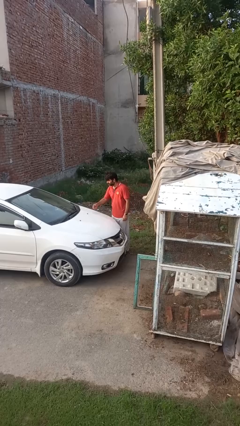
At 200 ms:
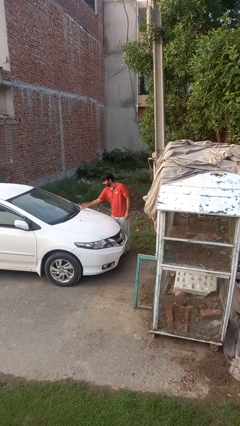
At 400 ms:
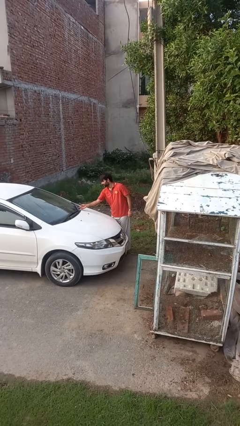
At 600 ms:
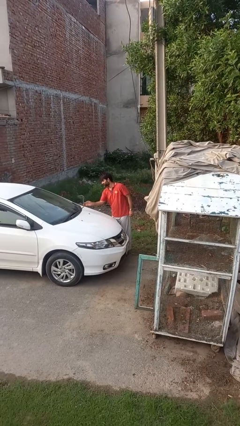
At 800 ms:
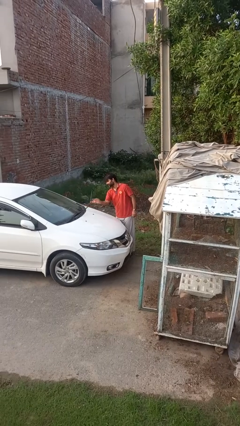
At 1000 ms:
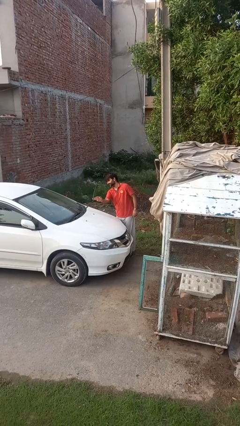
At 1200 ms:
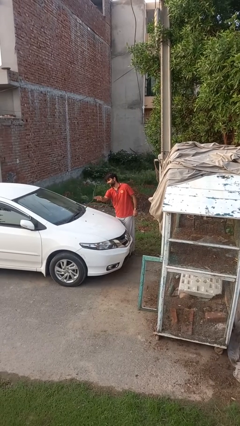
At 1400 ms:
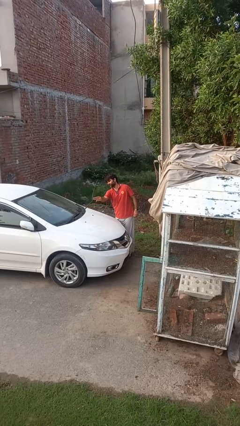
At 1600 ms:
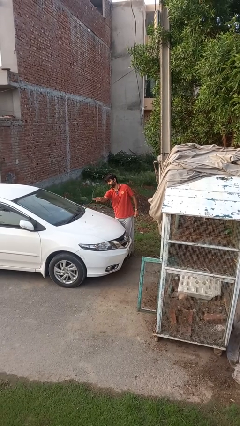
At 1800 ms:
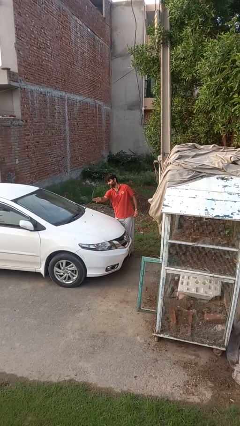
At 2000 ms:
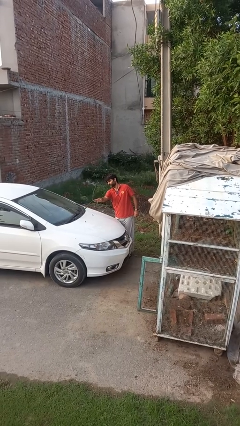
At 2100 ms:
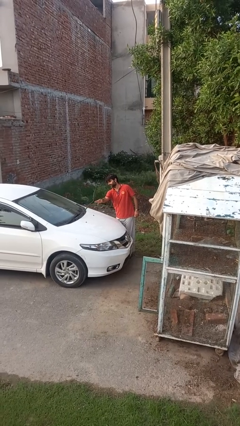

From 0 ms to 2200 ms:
person flips up car wipers

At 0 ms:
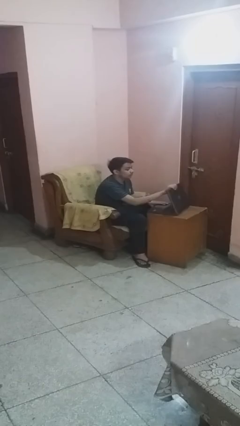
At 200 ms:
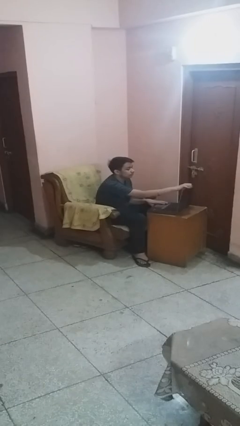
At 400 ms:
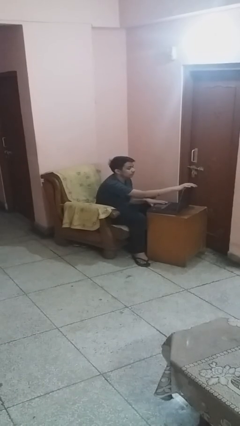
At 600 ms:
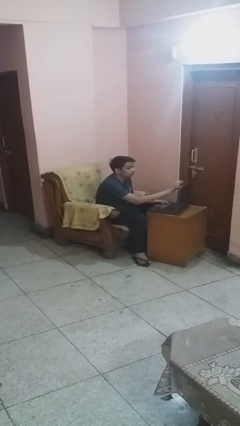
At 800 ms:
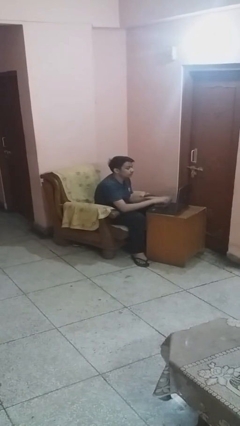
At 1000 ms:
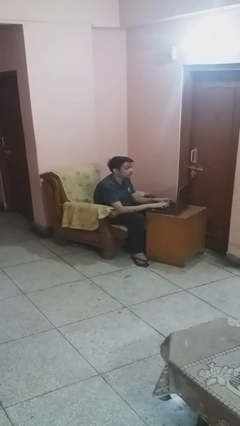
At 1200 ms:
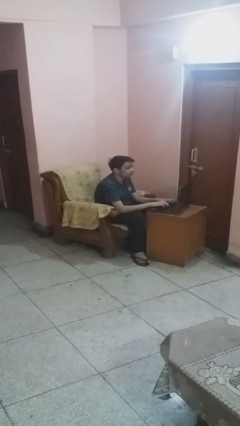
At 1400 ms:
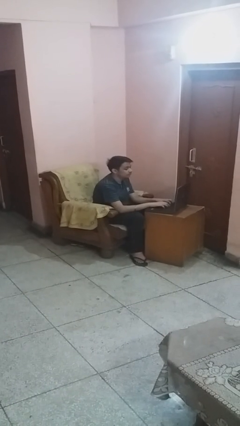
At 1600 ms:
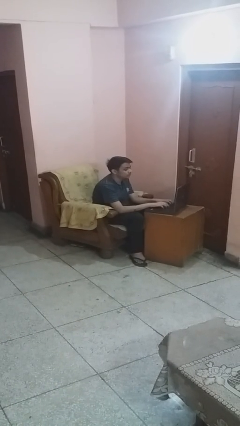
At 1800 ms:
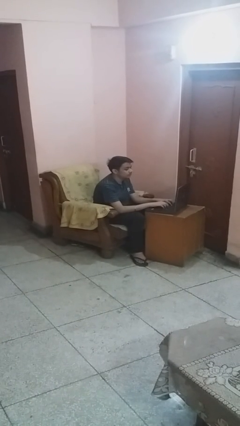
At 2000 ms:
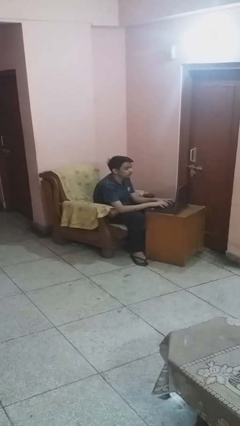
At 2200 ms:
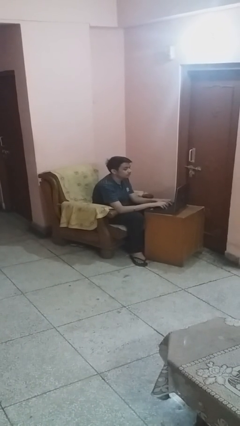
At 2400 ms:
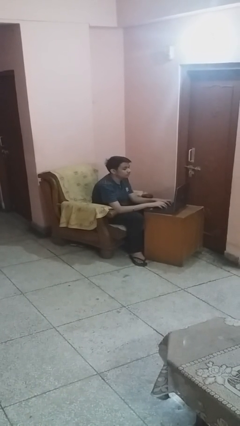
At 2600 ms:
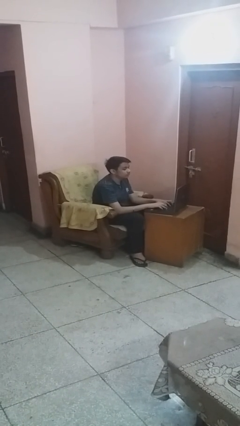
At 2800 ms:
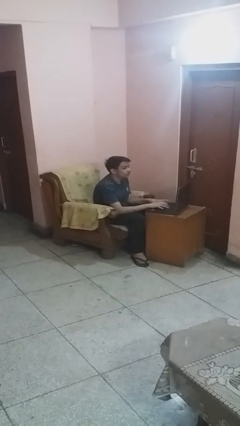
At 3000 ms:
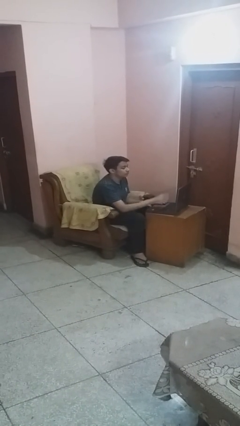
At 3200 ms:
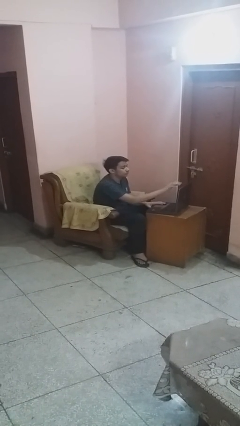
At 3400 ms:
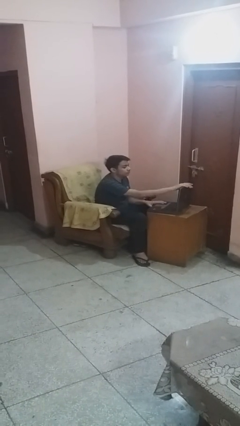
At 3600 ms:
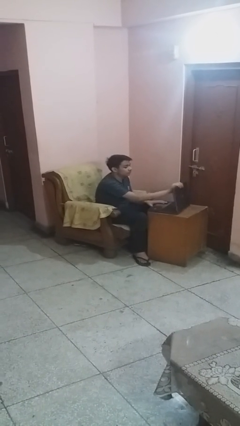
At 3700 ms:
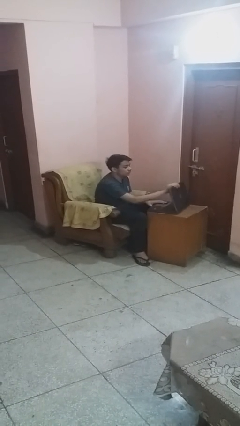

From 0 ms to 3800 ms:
person interacts with laptop

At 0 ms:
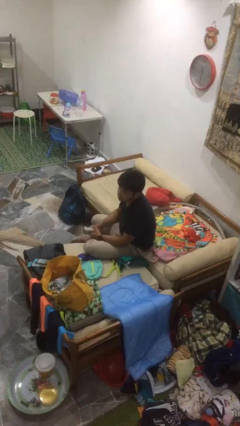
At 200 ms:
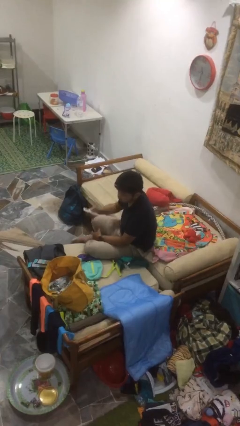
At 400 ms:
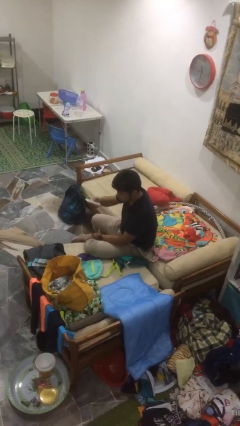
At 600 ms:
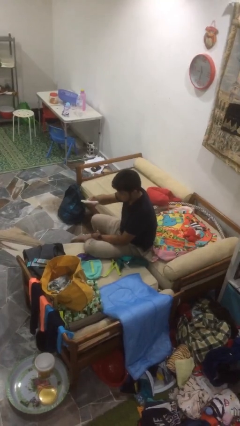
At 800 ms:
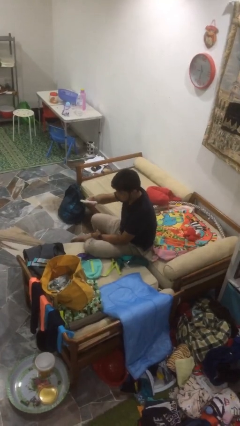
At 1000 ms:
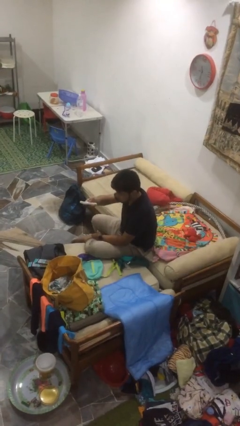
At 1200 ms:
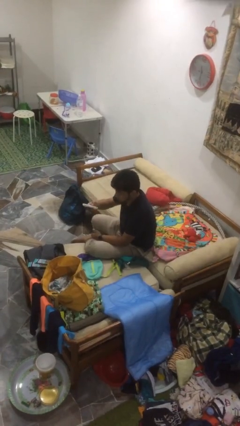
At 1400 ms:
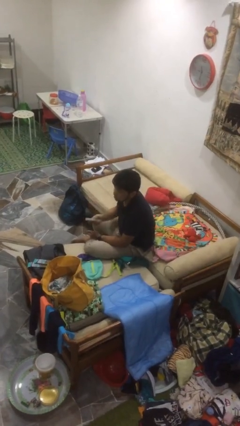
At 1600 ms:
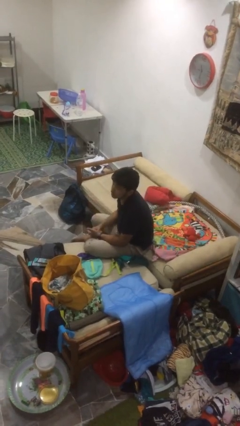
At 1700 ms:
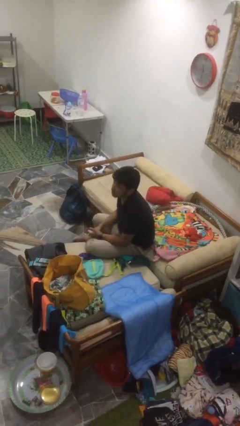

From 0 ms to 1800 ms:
person uses television remote

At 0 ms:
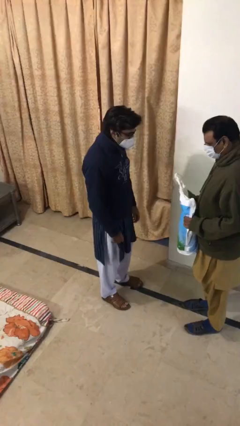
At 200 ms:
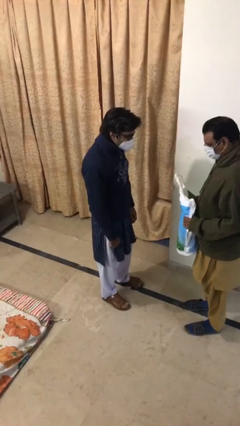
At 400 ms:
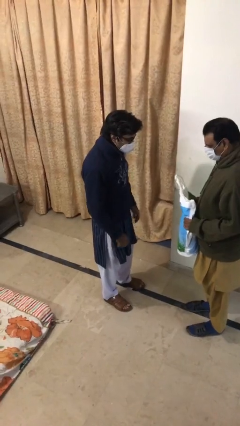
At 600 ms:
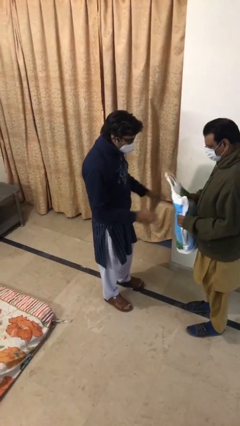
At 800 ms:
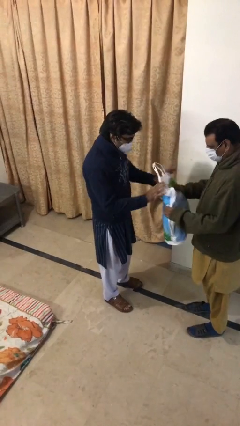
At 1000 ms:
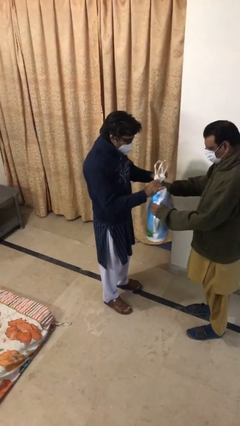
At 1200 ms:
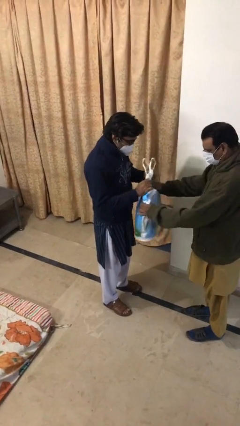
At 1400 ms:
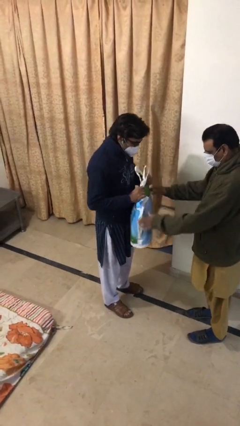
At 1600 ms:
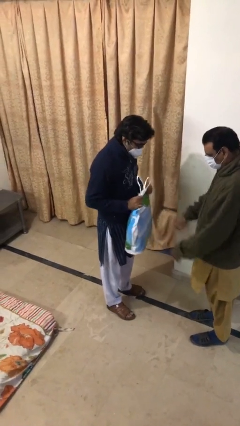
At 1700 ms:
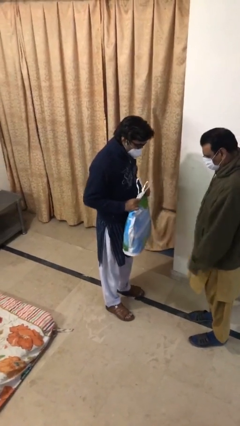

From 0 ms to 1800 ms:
person transfers object to person

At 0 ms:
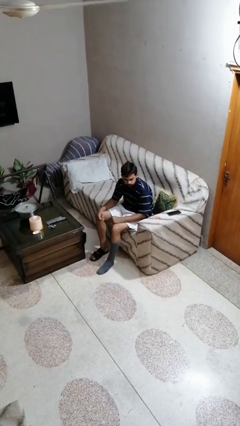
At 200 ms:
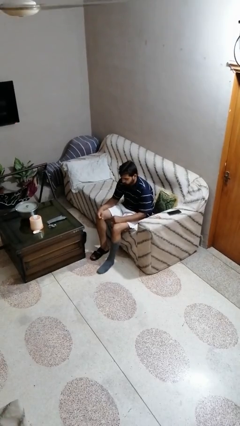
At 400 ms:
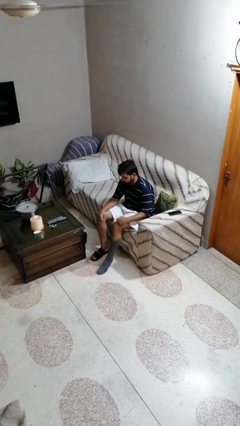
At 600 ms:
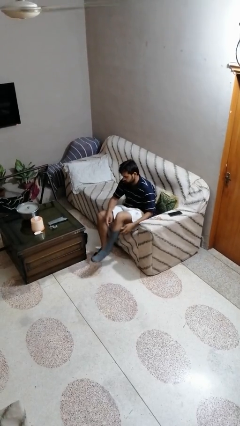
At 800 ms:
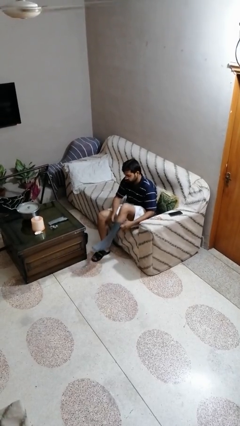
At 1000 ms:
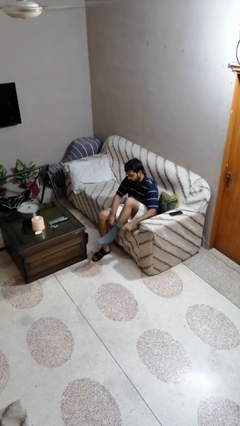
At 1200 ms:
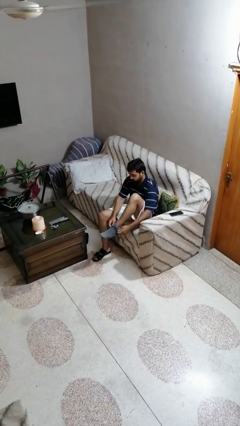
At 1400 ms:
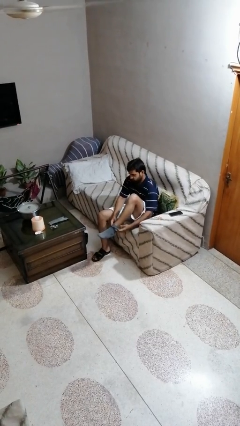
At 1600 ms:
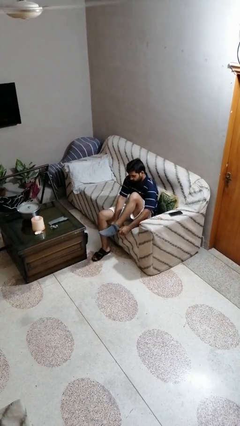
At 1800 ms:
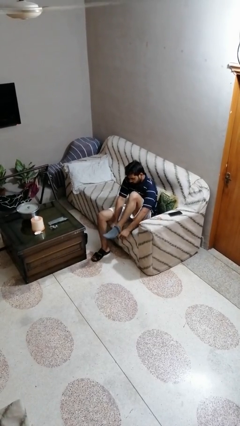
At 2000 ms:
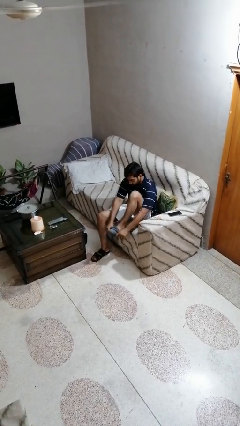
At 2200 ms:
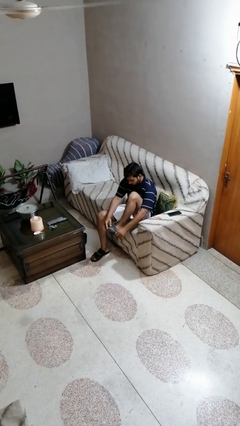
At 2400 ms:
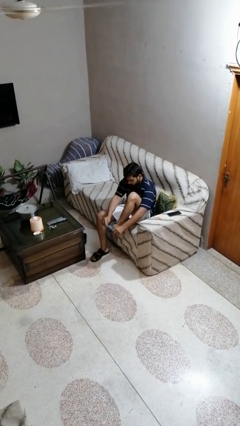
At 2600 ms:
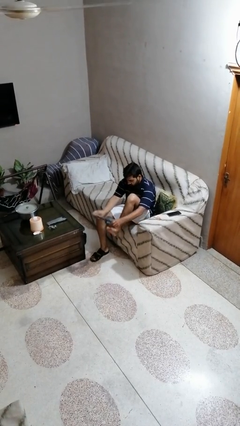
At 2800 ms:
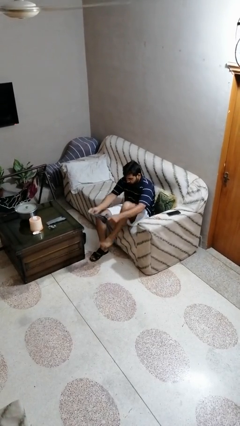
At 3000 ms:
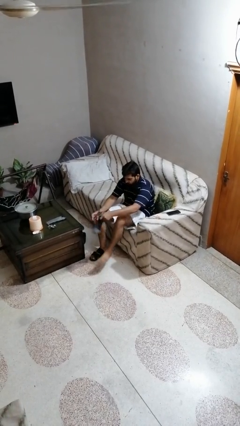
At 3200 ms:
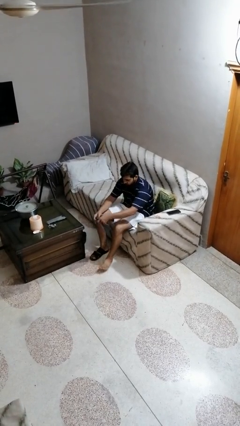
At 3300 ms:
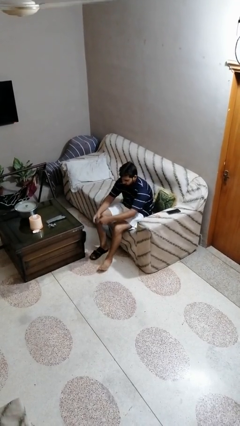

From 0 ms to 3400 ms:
person takes off socks

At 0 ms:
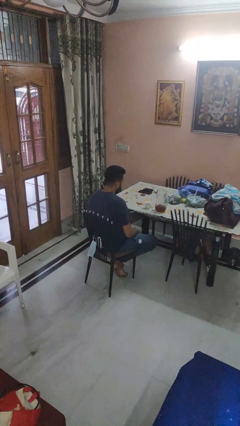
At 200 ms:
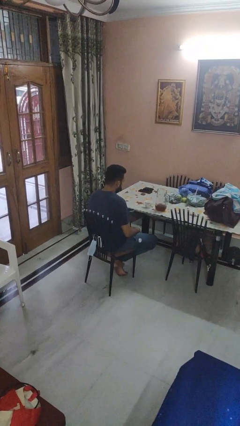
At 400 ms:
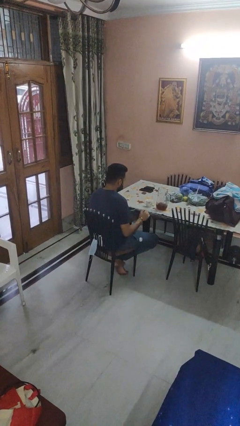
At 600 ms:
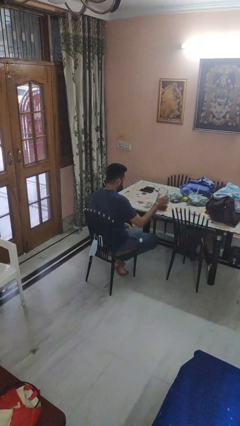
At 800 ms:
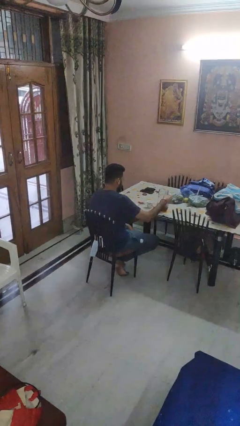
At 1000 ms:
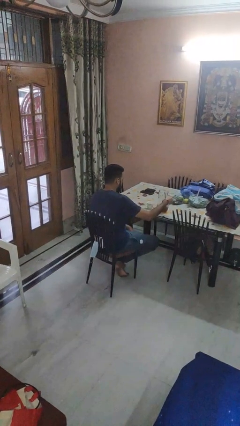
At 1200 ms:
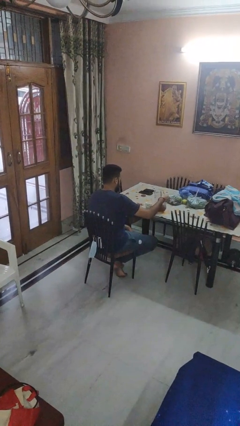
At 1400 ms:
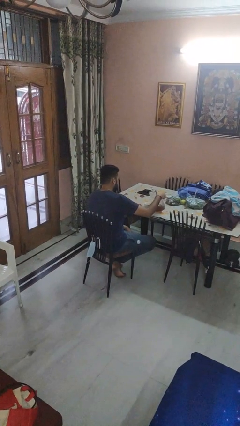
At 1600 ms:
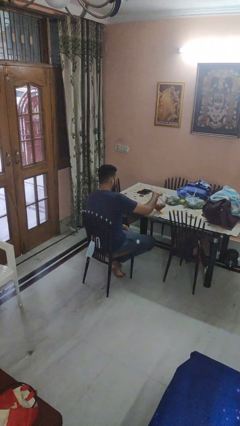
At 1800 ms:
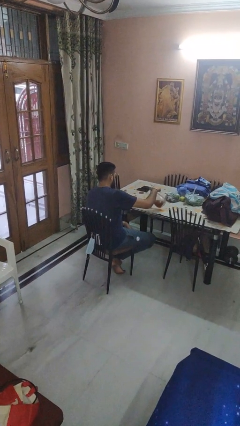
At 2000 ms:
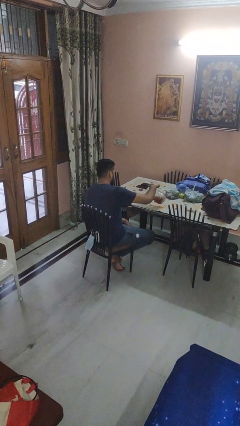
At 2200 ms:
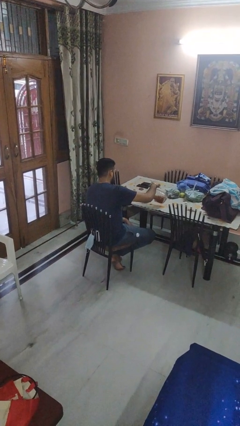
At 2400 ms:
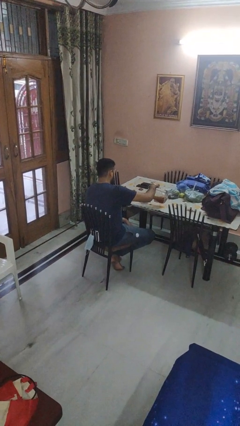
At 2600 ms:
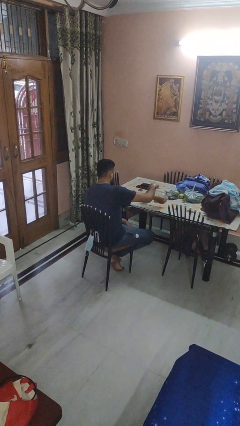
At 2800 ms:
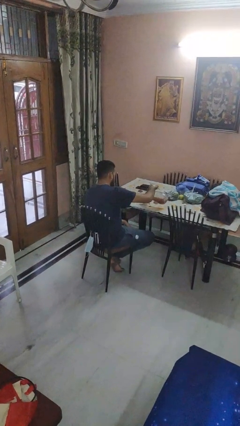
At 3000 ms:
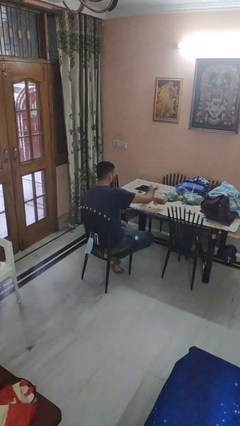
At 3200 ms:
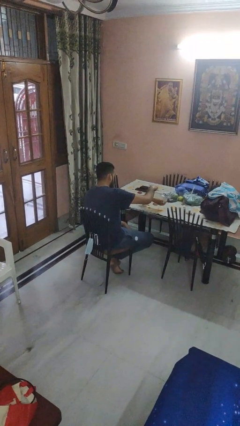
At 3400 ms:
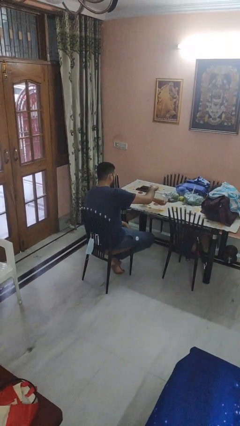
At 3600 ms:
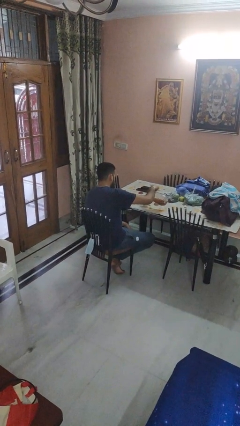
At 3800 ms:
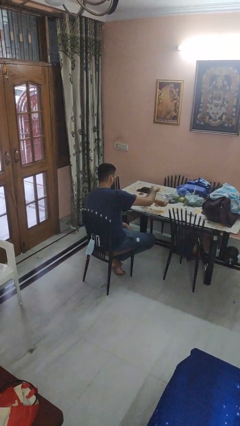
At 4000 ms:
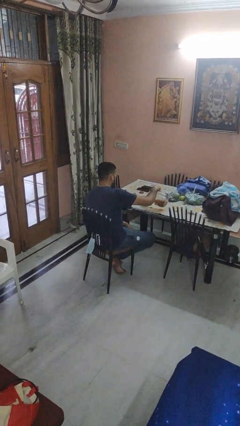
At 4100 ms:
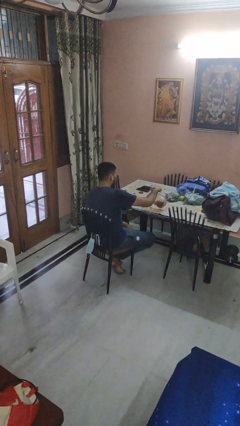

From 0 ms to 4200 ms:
person pours coffee into mug
